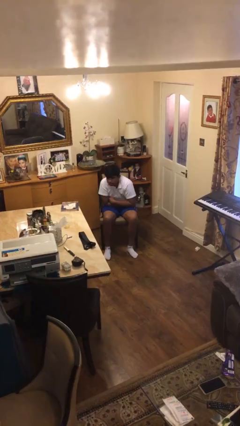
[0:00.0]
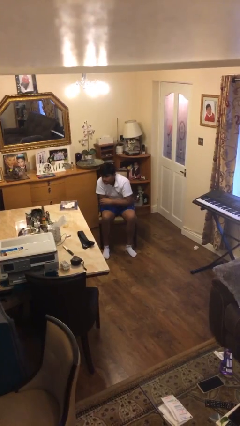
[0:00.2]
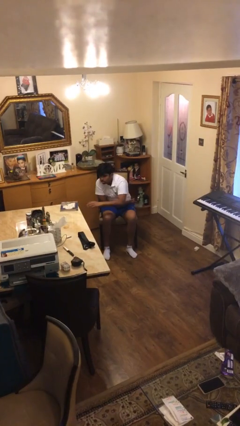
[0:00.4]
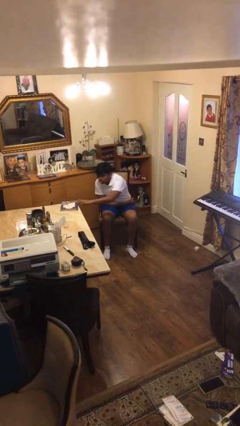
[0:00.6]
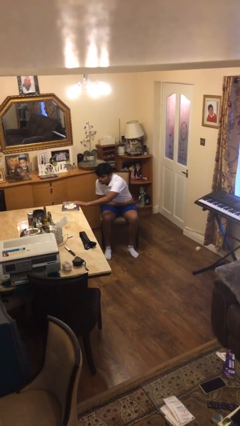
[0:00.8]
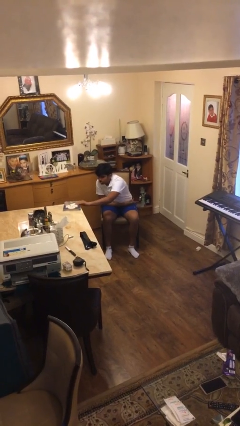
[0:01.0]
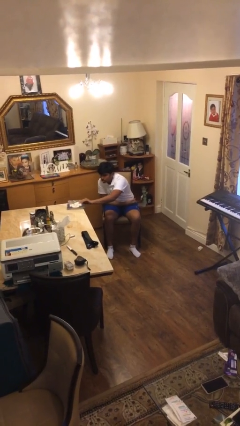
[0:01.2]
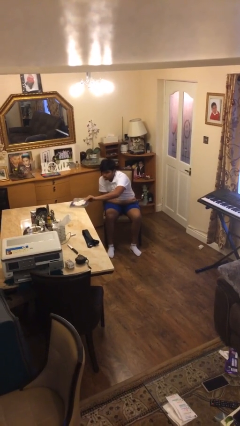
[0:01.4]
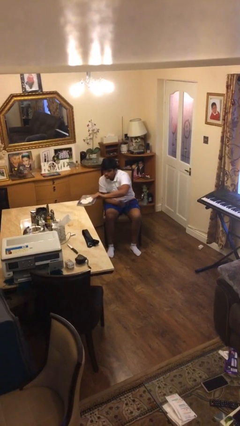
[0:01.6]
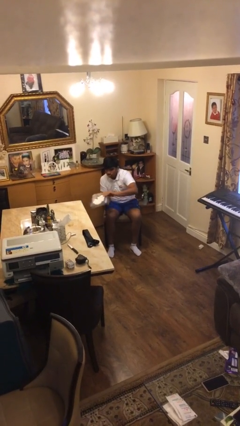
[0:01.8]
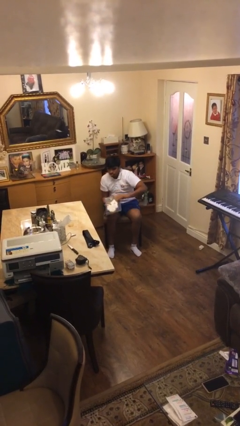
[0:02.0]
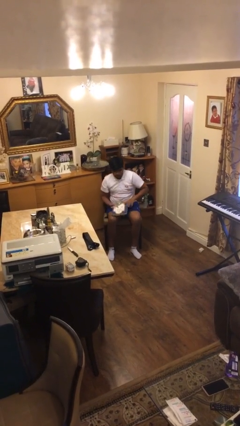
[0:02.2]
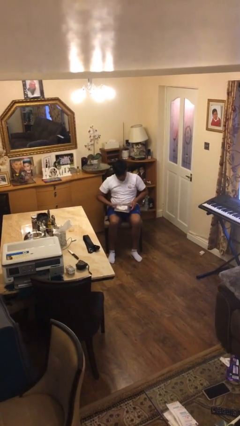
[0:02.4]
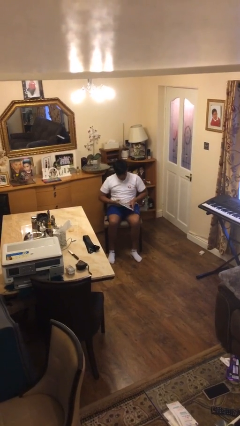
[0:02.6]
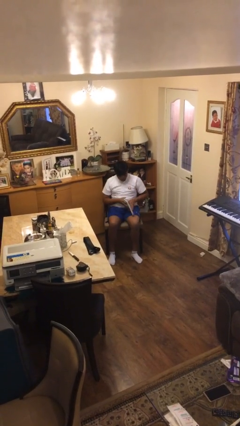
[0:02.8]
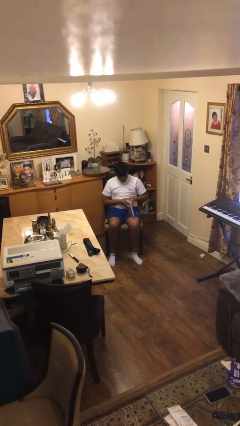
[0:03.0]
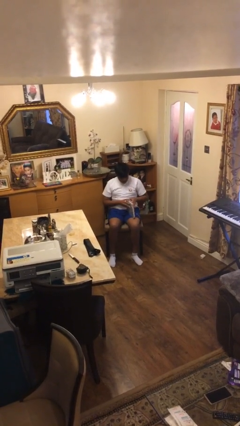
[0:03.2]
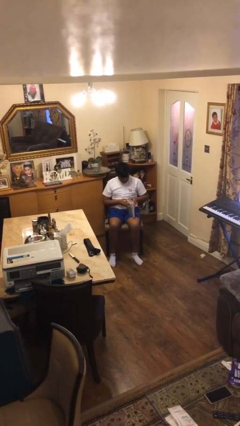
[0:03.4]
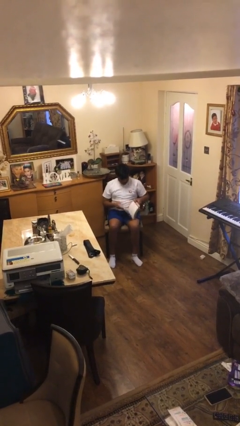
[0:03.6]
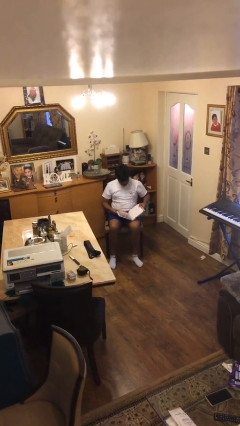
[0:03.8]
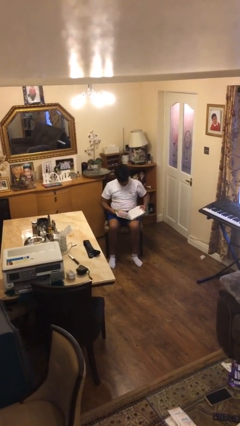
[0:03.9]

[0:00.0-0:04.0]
person picks up object from table

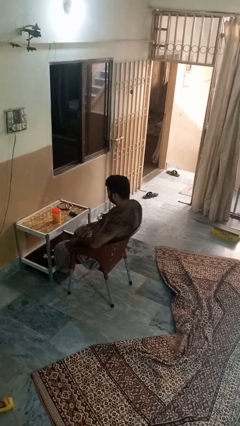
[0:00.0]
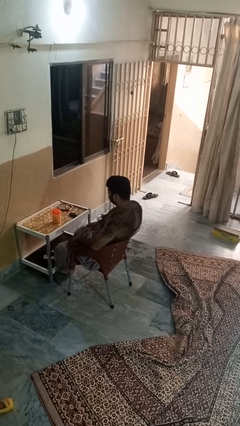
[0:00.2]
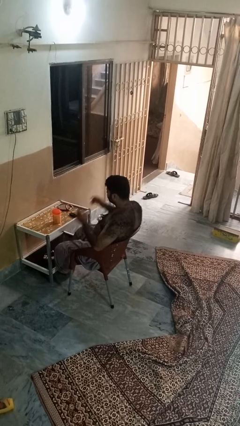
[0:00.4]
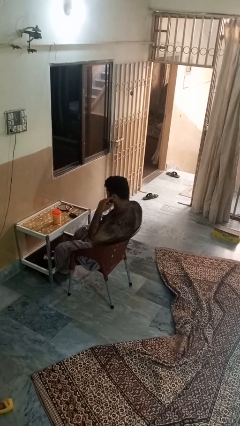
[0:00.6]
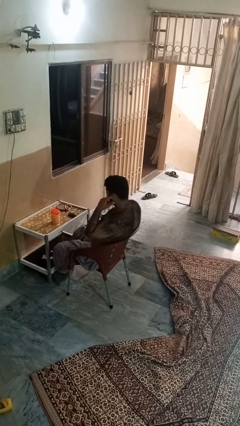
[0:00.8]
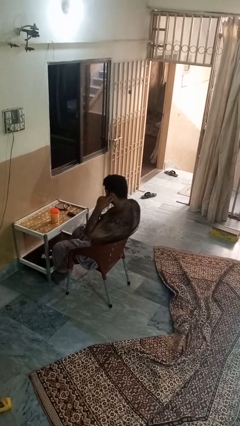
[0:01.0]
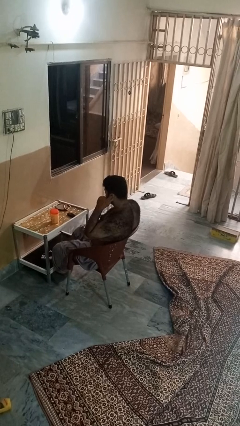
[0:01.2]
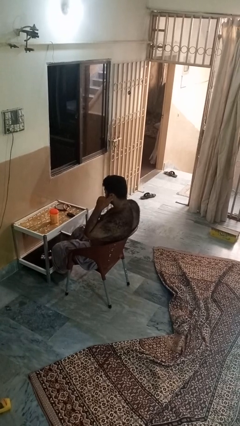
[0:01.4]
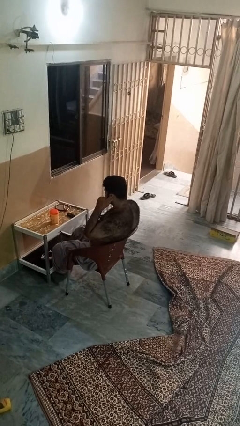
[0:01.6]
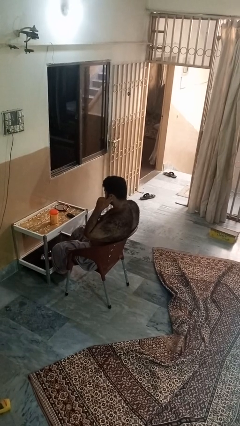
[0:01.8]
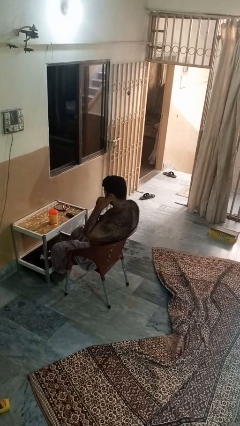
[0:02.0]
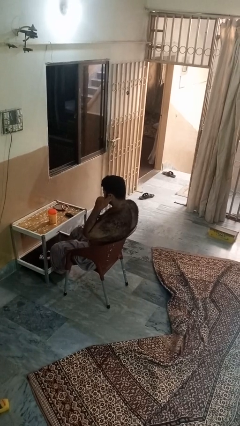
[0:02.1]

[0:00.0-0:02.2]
person puts fingers in ear

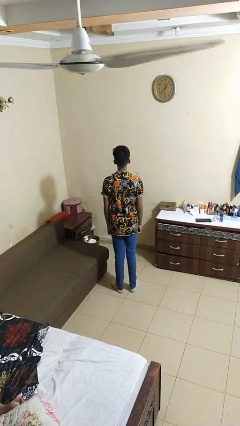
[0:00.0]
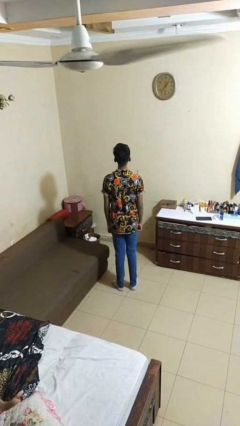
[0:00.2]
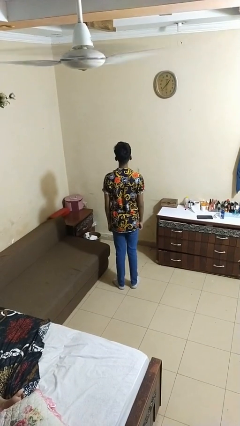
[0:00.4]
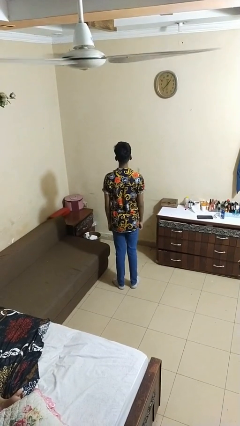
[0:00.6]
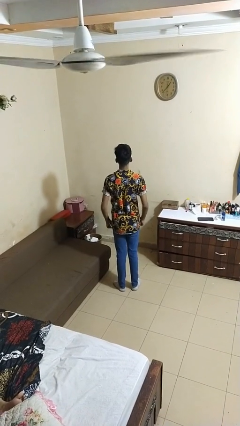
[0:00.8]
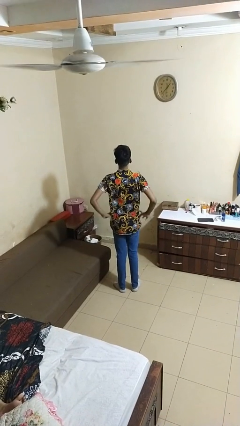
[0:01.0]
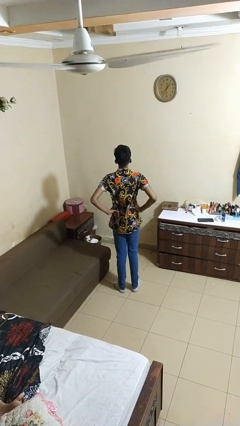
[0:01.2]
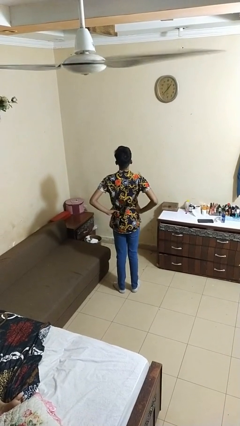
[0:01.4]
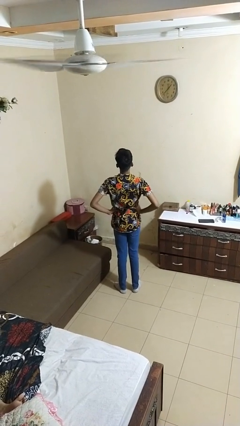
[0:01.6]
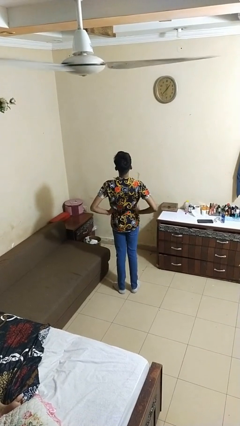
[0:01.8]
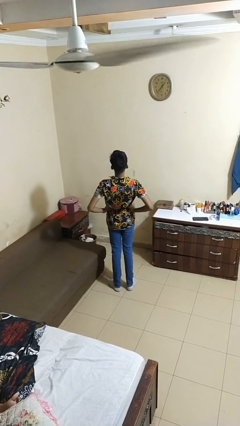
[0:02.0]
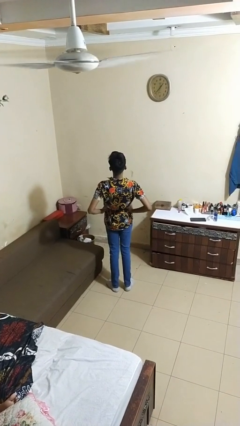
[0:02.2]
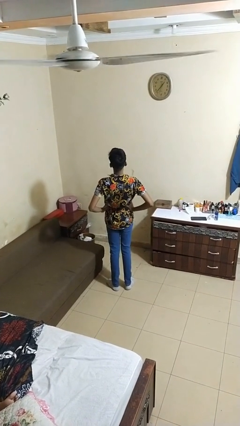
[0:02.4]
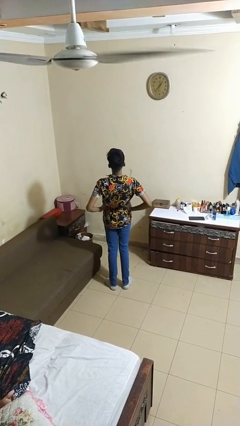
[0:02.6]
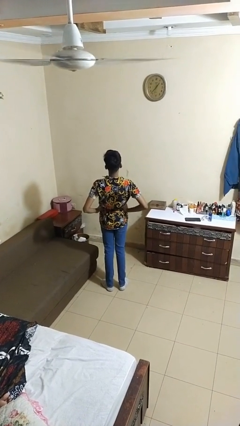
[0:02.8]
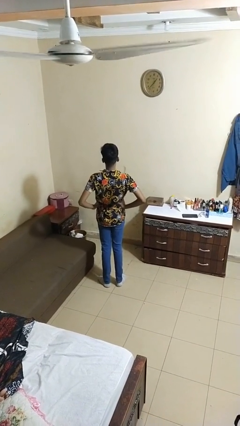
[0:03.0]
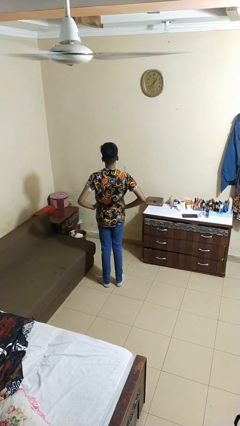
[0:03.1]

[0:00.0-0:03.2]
person stretches back

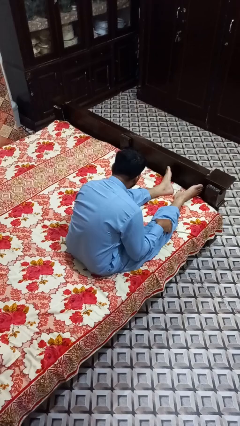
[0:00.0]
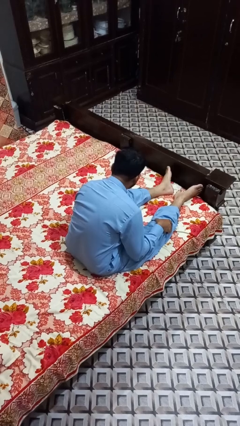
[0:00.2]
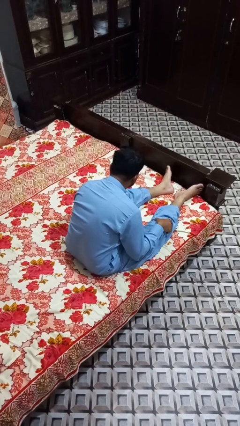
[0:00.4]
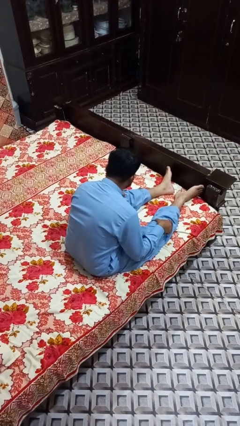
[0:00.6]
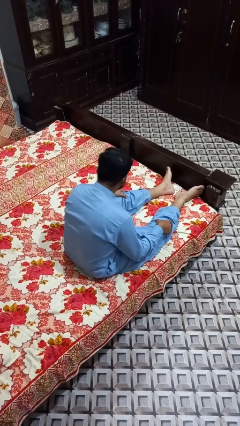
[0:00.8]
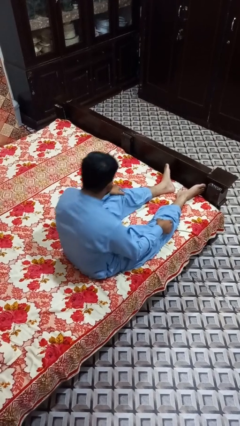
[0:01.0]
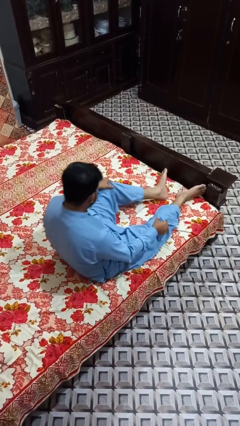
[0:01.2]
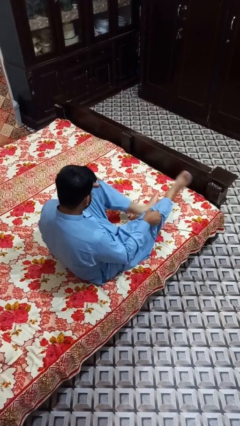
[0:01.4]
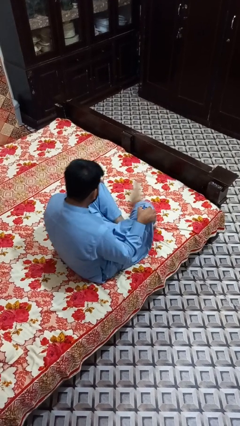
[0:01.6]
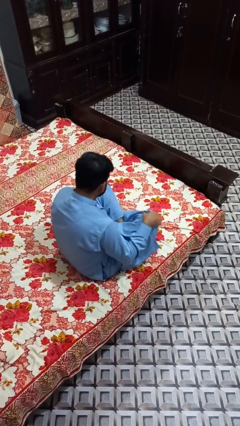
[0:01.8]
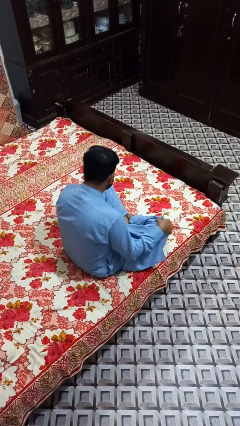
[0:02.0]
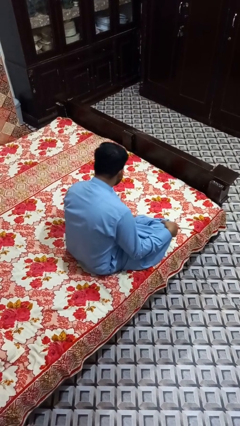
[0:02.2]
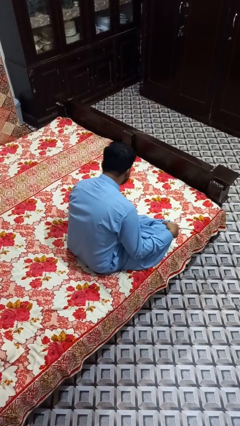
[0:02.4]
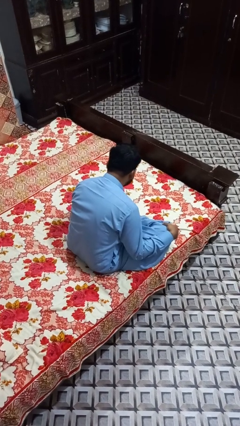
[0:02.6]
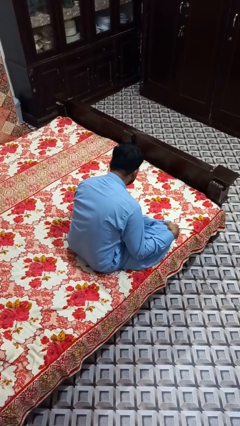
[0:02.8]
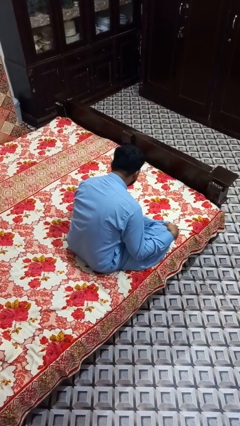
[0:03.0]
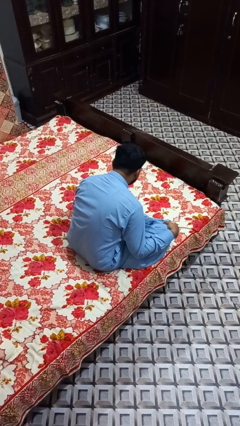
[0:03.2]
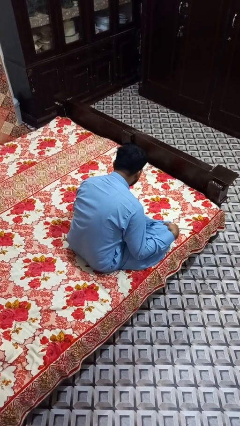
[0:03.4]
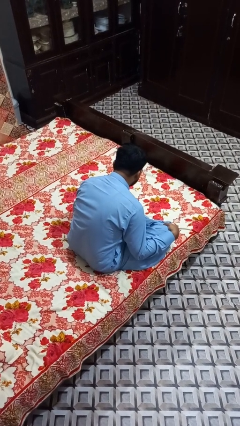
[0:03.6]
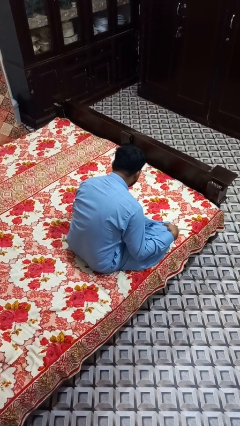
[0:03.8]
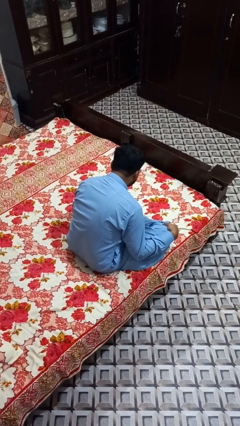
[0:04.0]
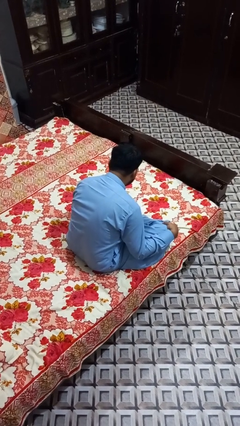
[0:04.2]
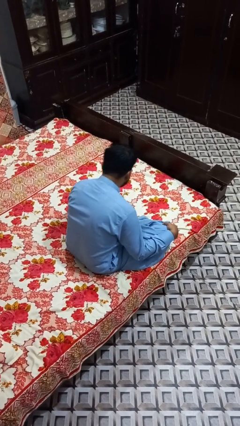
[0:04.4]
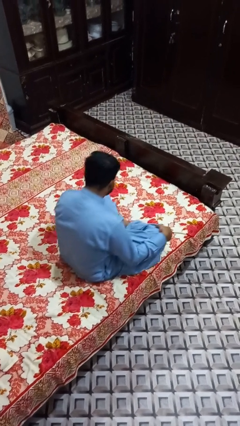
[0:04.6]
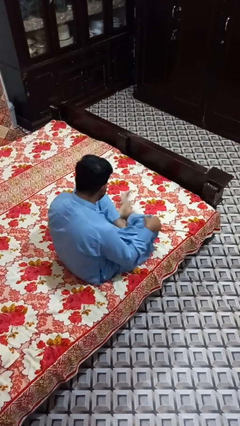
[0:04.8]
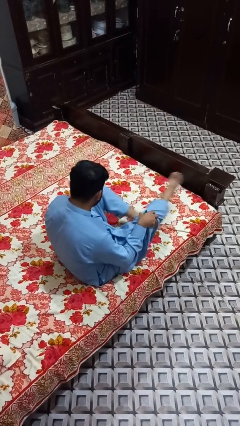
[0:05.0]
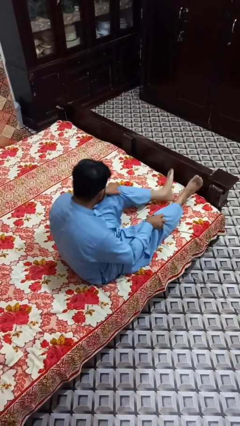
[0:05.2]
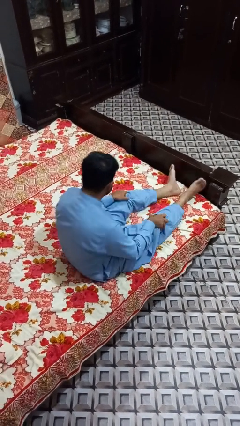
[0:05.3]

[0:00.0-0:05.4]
person crosses legs

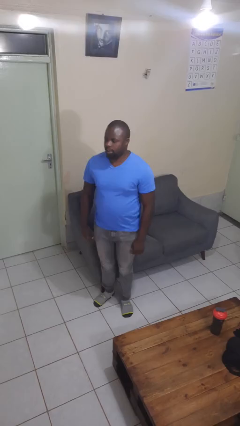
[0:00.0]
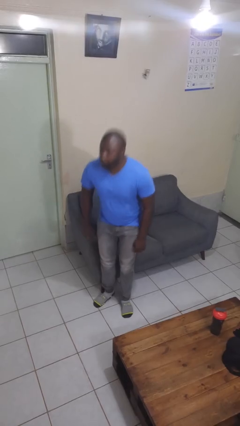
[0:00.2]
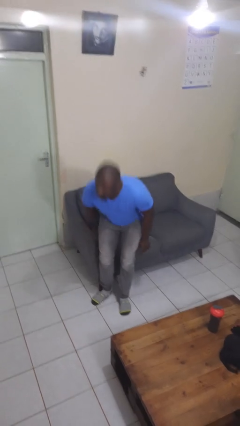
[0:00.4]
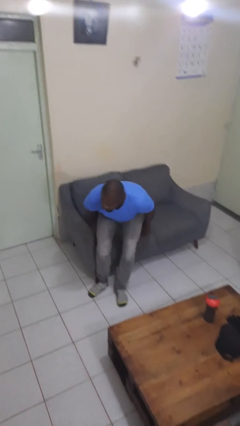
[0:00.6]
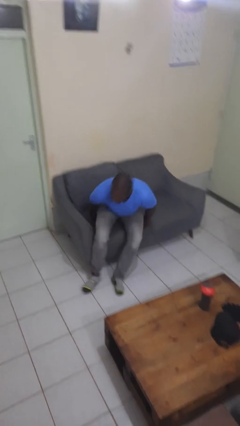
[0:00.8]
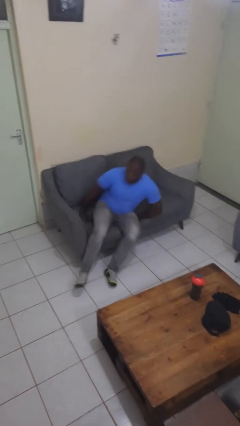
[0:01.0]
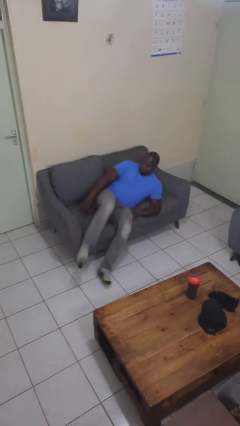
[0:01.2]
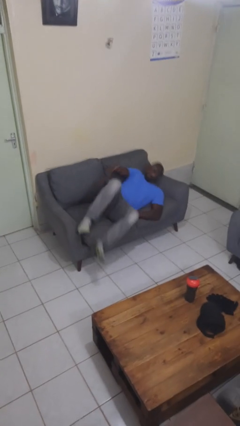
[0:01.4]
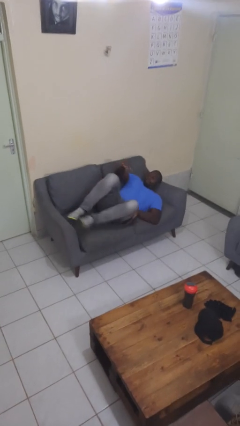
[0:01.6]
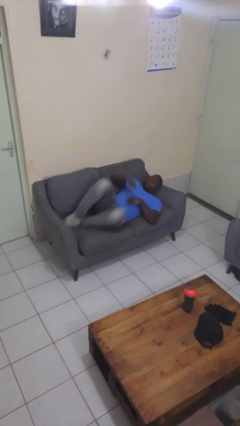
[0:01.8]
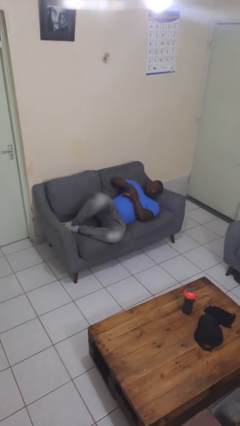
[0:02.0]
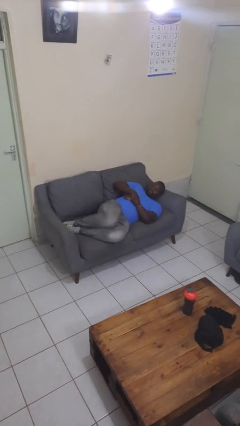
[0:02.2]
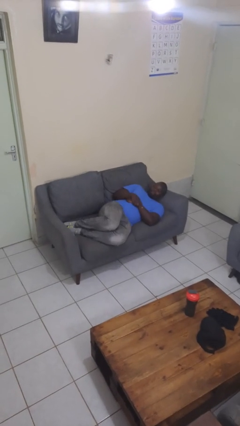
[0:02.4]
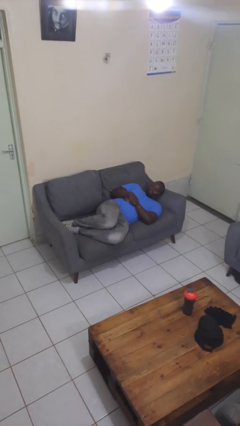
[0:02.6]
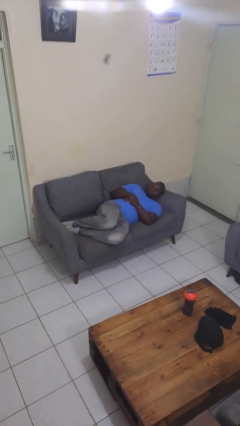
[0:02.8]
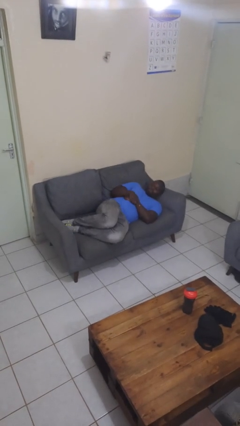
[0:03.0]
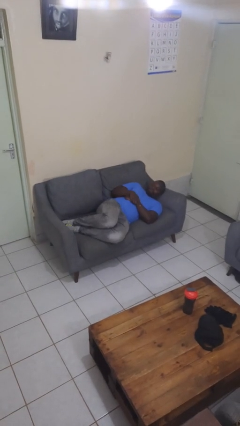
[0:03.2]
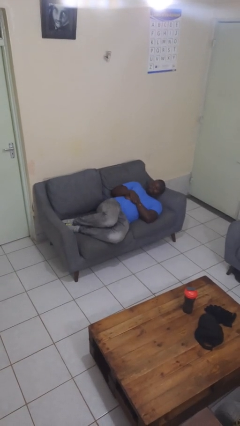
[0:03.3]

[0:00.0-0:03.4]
person lies down on couch
